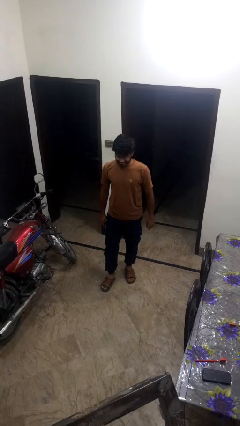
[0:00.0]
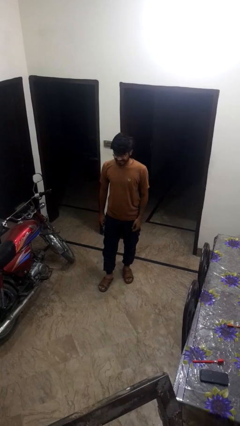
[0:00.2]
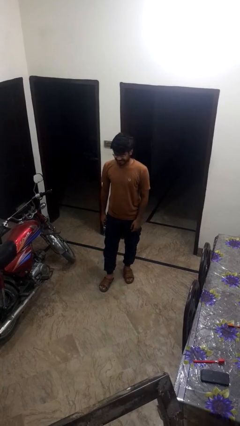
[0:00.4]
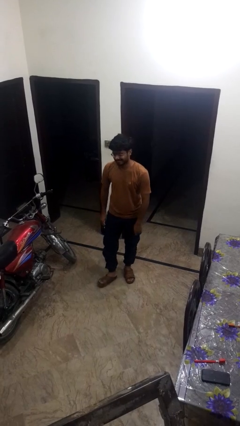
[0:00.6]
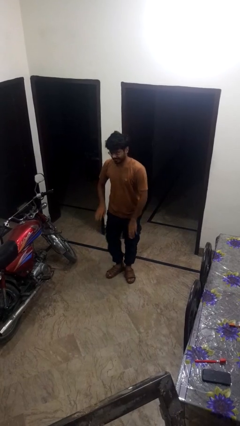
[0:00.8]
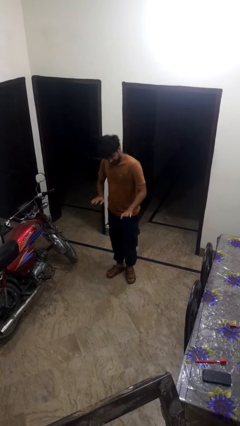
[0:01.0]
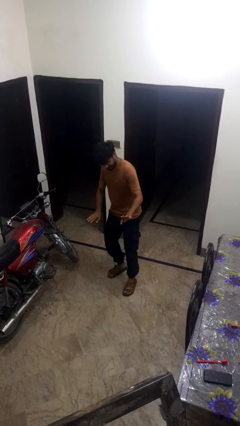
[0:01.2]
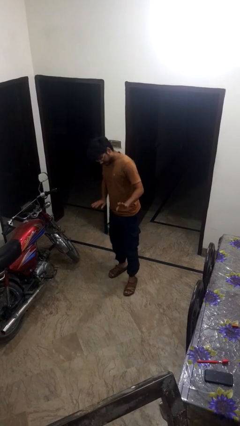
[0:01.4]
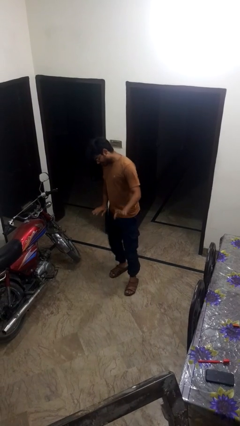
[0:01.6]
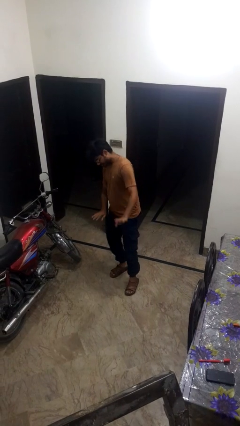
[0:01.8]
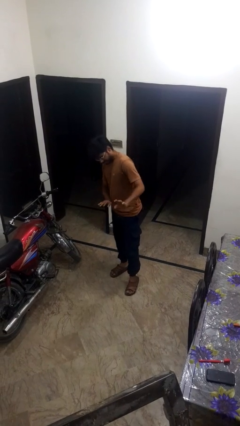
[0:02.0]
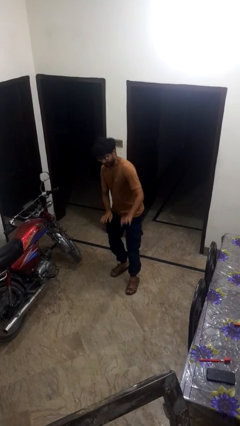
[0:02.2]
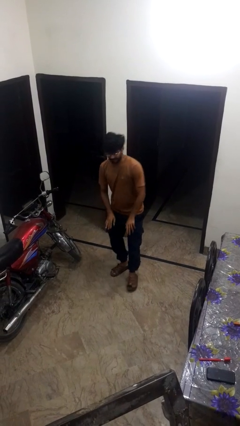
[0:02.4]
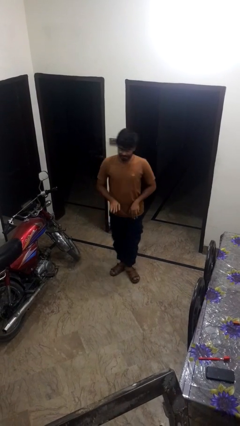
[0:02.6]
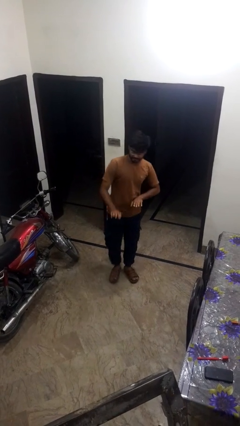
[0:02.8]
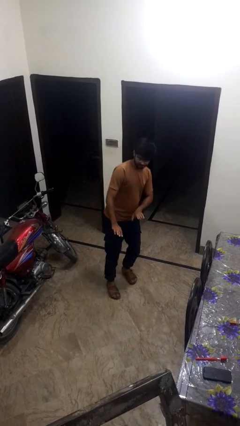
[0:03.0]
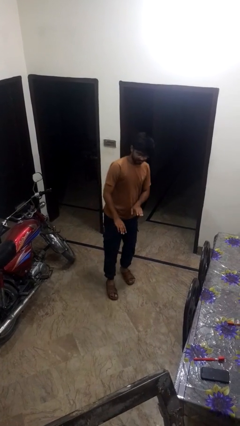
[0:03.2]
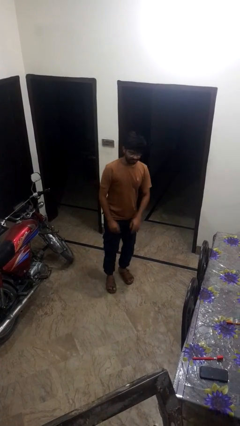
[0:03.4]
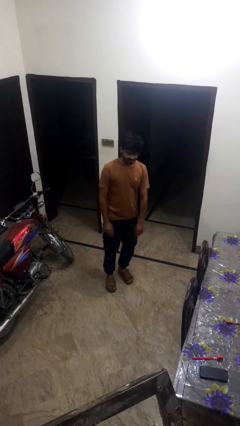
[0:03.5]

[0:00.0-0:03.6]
person dances in place

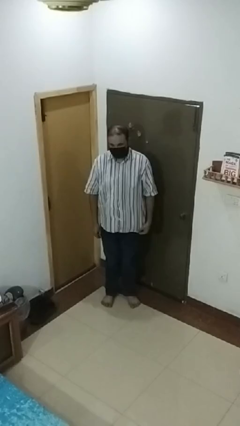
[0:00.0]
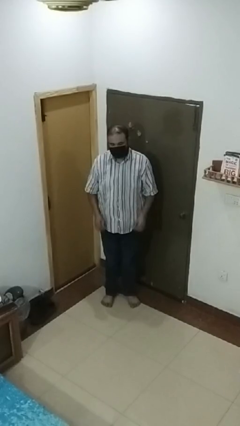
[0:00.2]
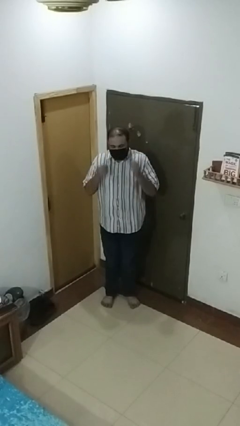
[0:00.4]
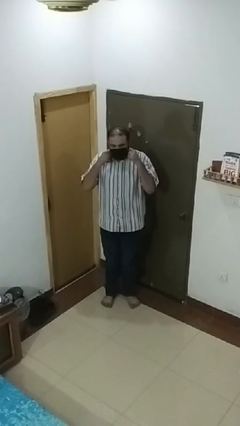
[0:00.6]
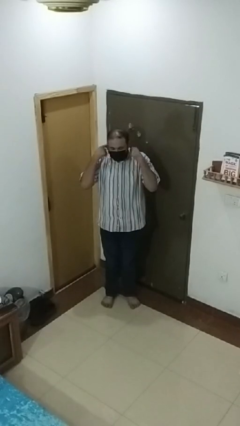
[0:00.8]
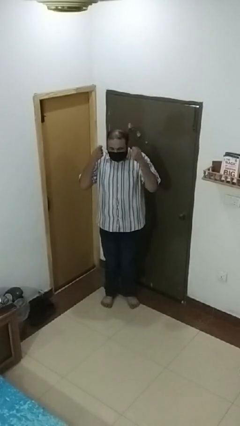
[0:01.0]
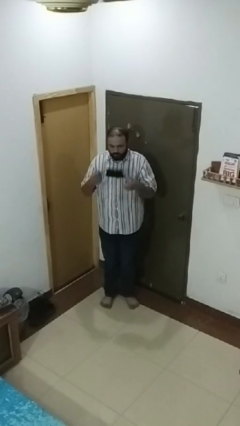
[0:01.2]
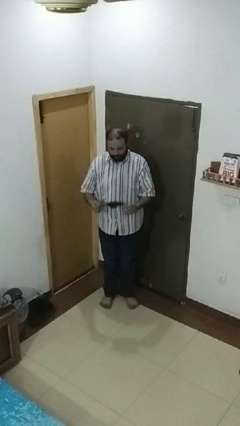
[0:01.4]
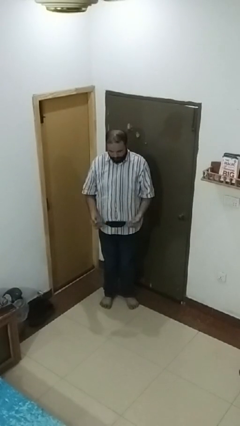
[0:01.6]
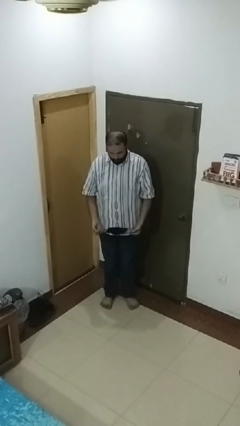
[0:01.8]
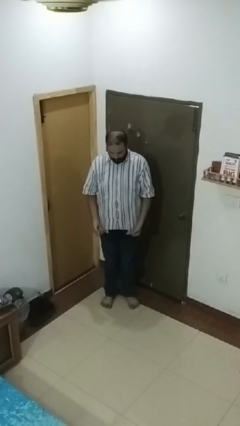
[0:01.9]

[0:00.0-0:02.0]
person takes off facemask

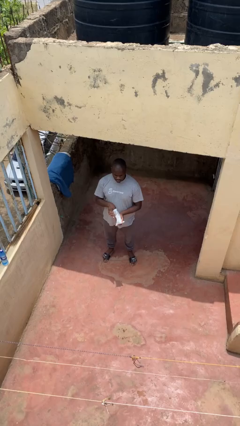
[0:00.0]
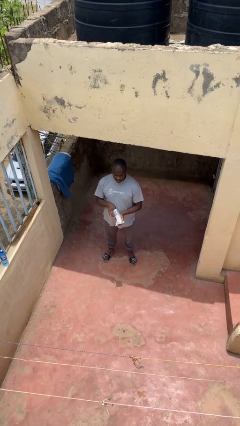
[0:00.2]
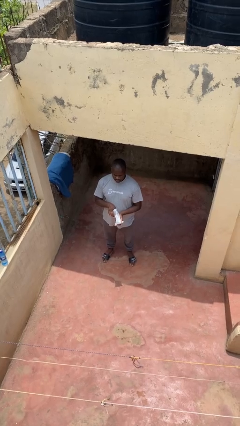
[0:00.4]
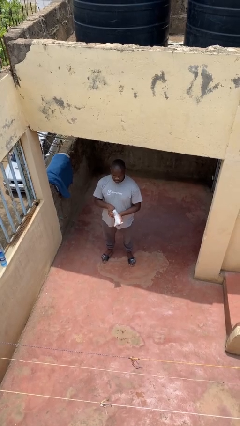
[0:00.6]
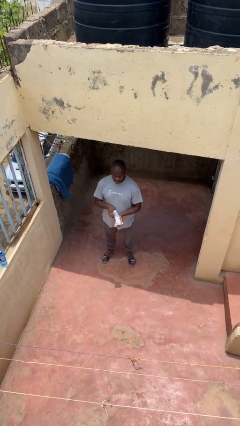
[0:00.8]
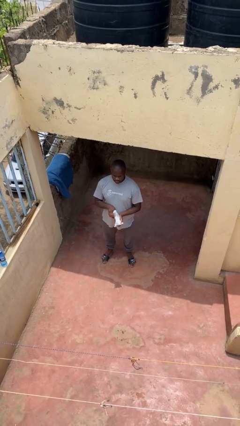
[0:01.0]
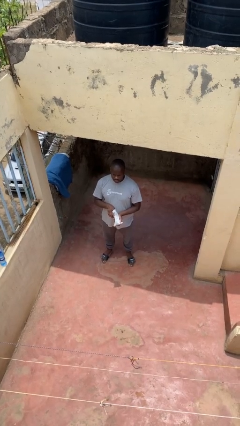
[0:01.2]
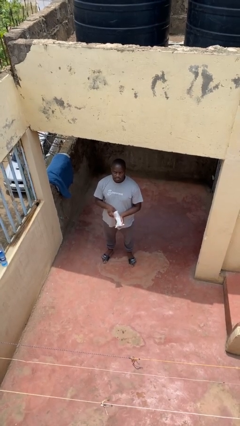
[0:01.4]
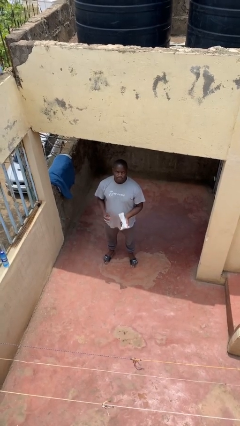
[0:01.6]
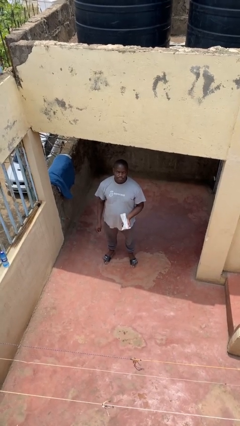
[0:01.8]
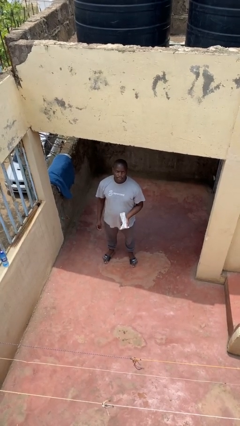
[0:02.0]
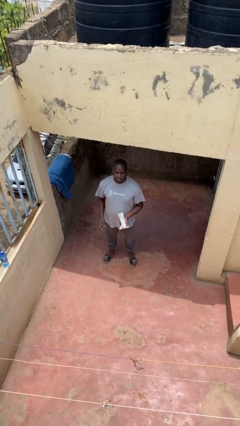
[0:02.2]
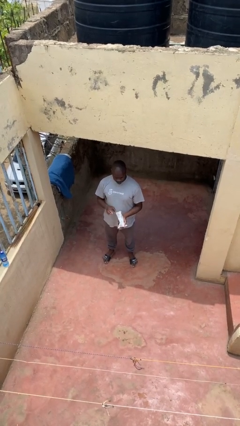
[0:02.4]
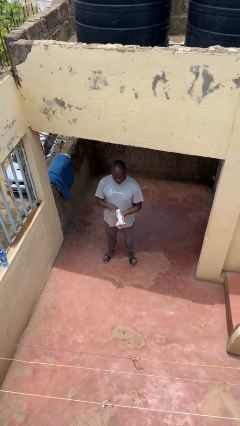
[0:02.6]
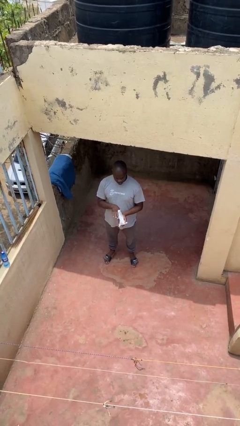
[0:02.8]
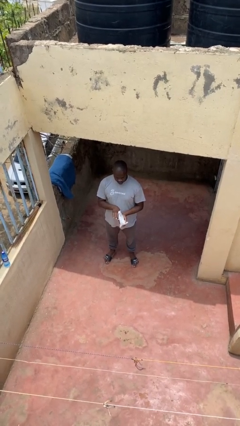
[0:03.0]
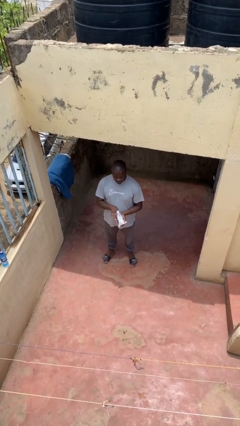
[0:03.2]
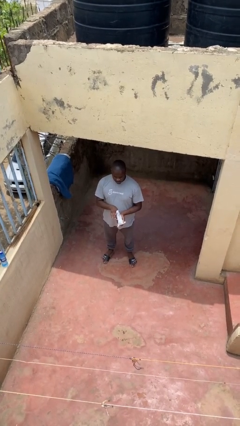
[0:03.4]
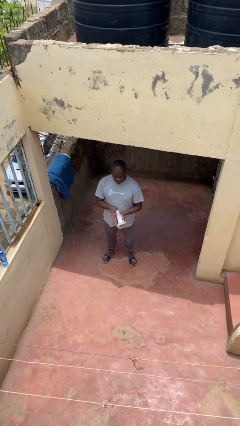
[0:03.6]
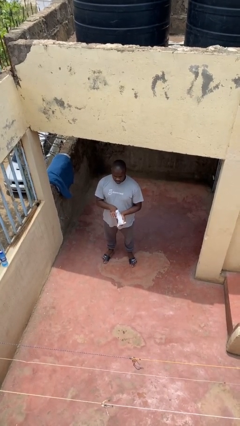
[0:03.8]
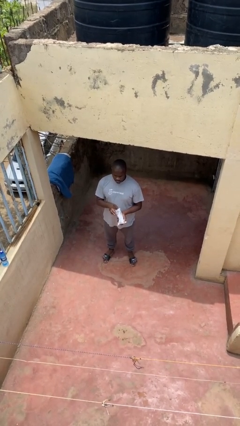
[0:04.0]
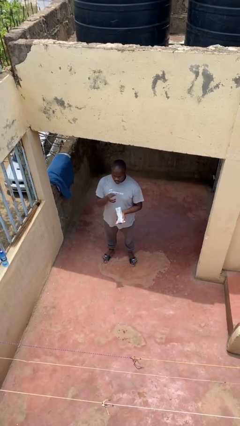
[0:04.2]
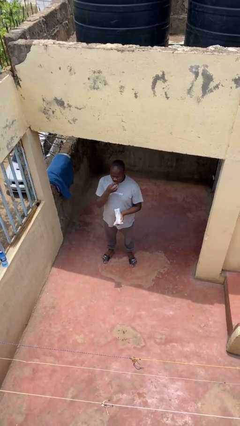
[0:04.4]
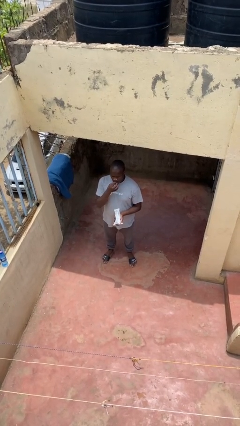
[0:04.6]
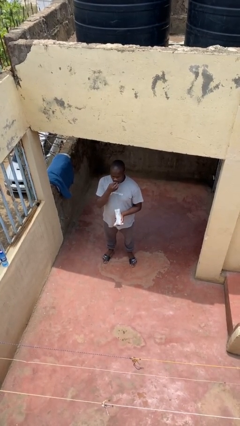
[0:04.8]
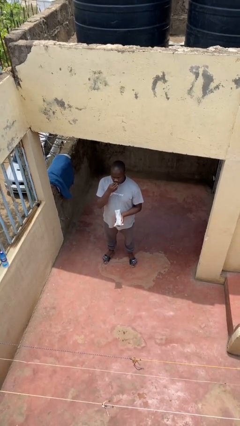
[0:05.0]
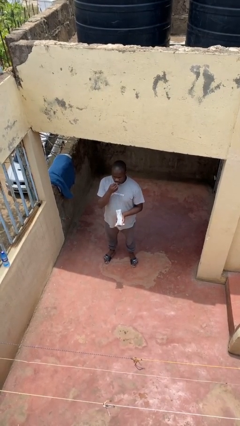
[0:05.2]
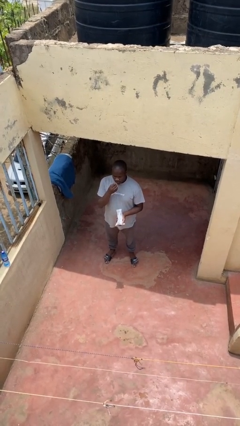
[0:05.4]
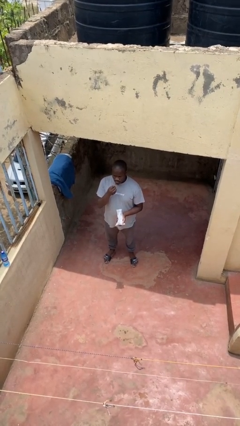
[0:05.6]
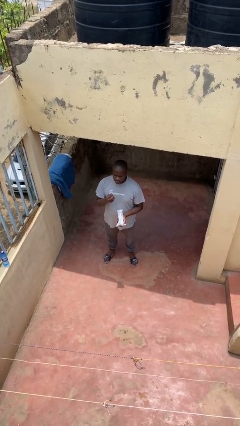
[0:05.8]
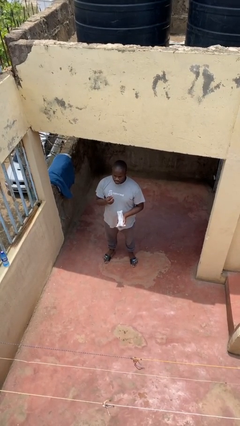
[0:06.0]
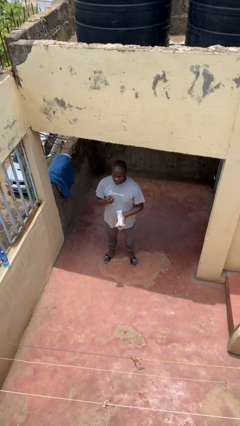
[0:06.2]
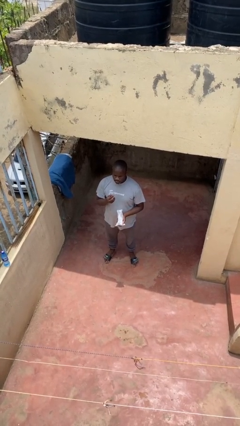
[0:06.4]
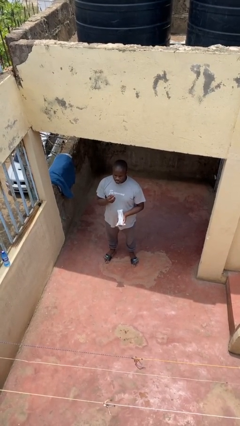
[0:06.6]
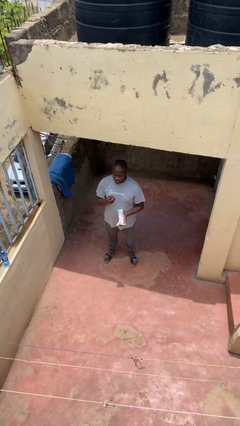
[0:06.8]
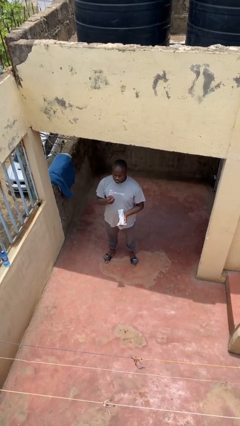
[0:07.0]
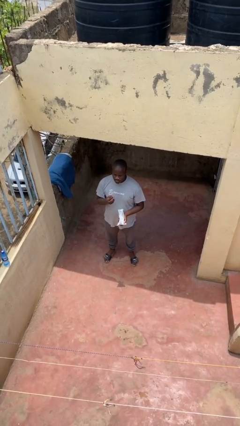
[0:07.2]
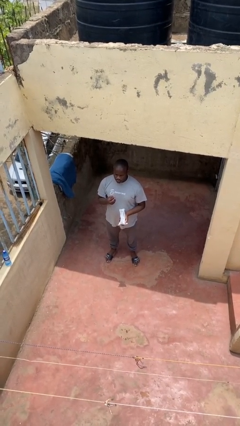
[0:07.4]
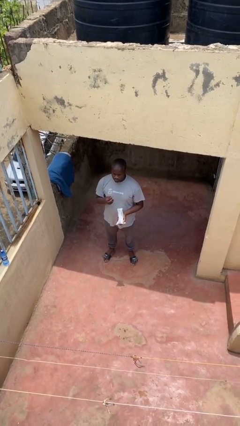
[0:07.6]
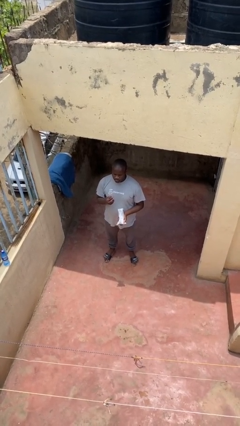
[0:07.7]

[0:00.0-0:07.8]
person eats snack from bag

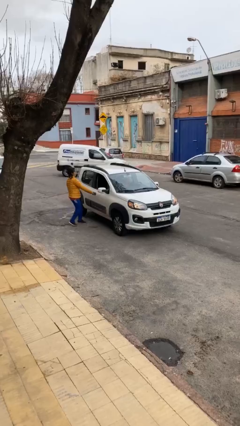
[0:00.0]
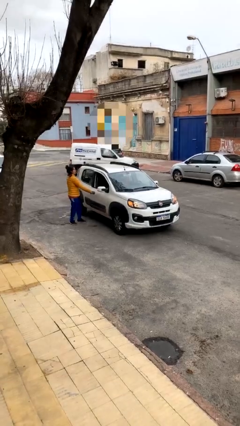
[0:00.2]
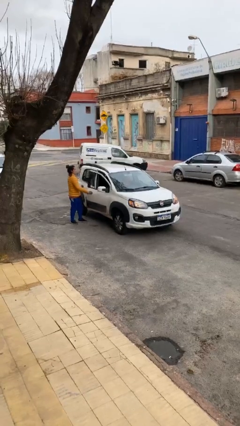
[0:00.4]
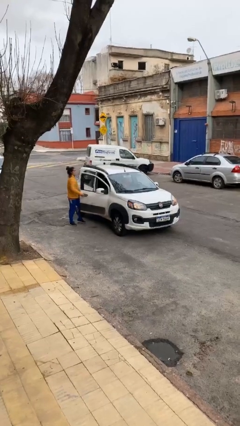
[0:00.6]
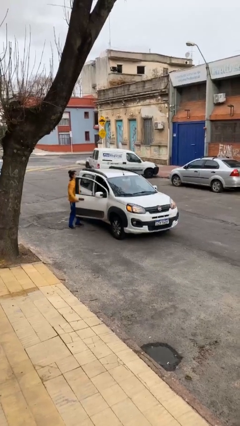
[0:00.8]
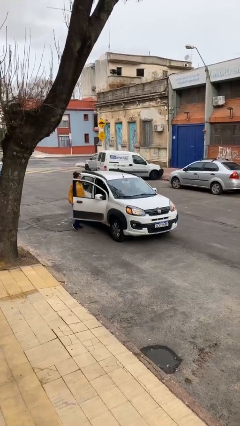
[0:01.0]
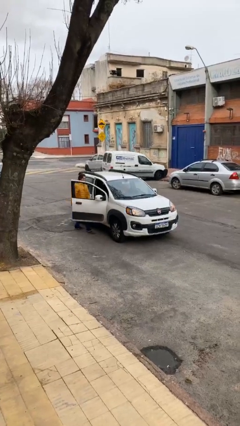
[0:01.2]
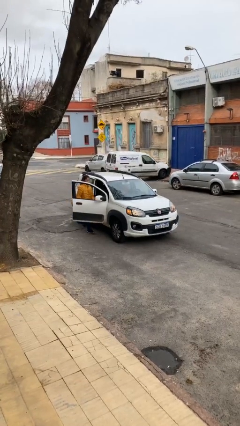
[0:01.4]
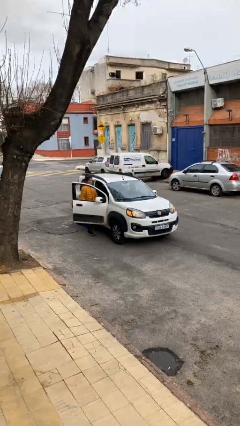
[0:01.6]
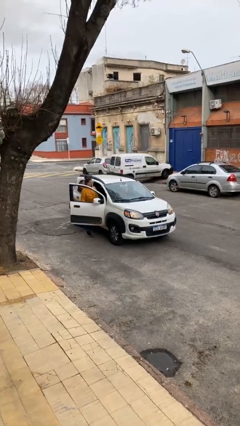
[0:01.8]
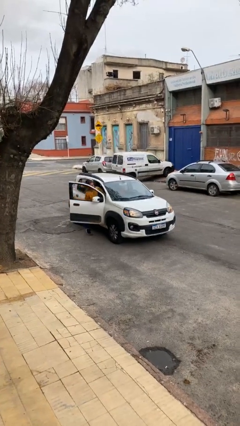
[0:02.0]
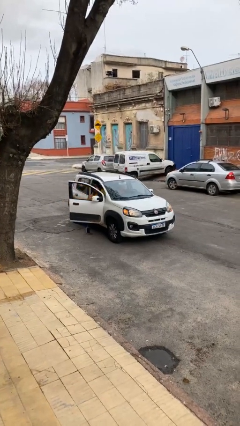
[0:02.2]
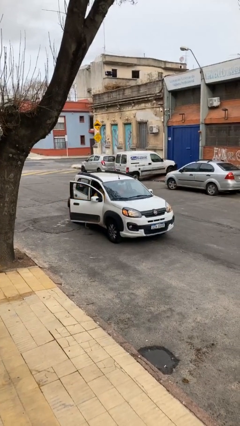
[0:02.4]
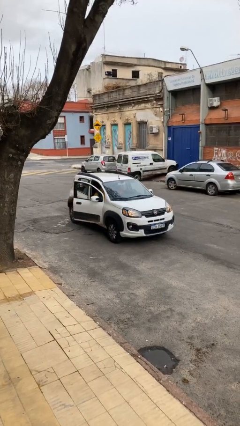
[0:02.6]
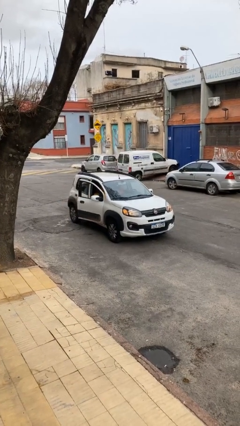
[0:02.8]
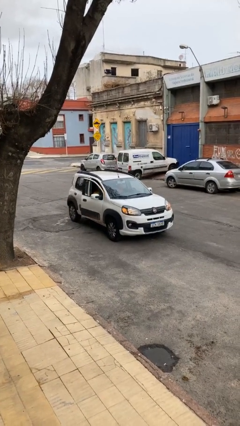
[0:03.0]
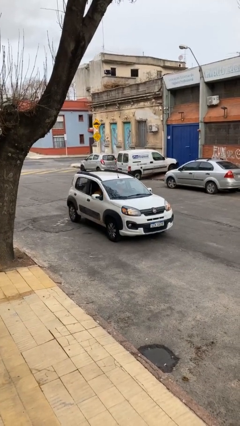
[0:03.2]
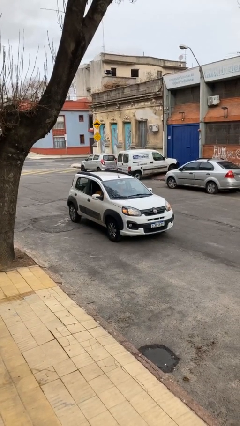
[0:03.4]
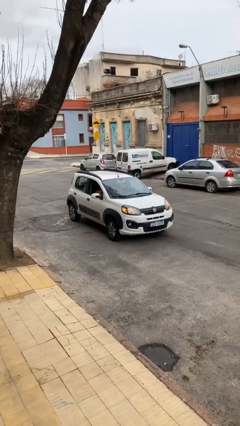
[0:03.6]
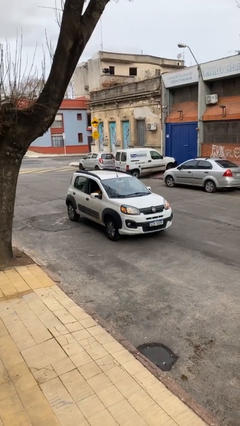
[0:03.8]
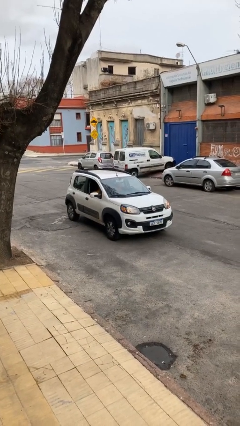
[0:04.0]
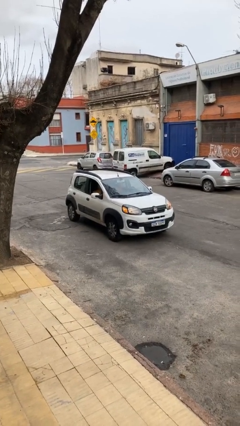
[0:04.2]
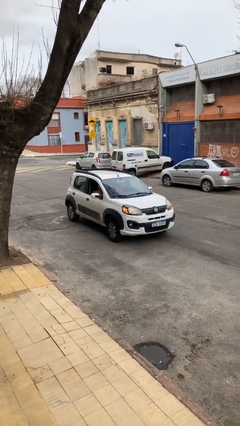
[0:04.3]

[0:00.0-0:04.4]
car picks up person
